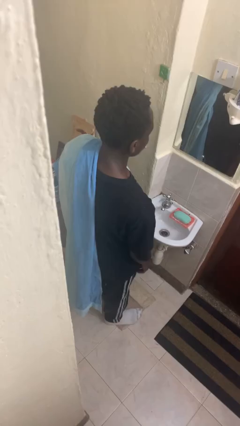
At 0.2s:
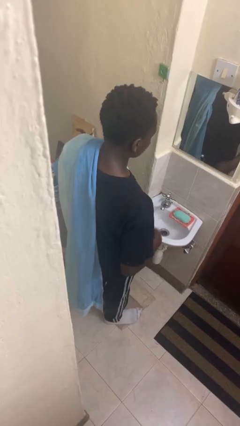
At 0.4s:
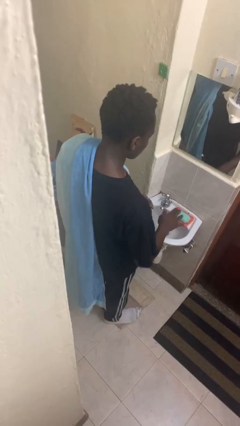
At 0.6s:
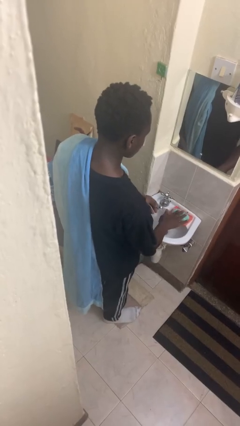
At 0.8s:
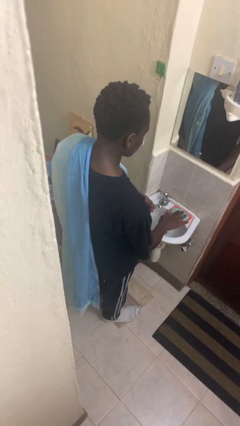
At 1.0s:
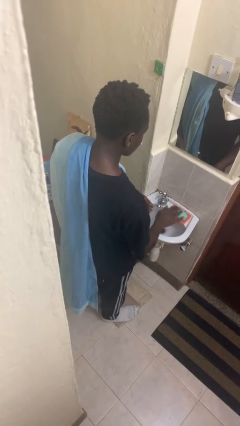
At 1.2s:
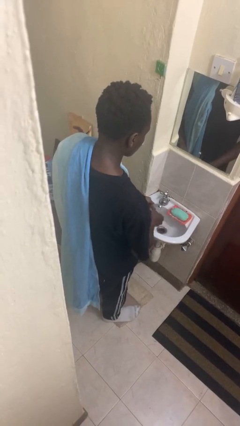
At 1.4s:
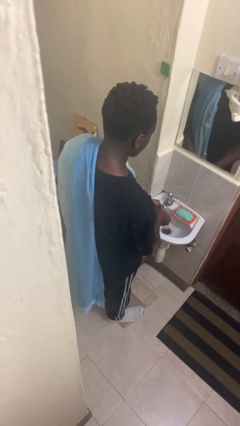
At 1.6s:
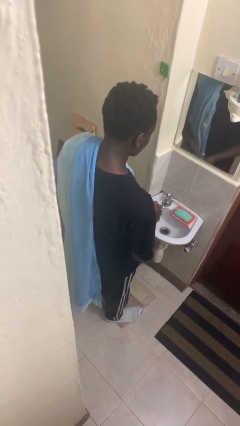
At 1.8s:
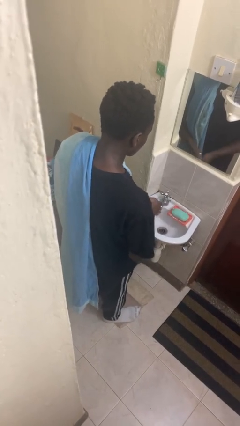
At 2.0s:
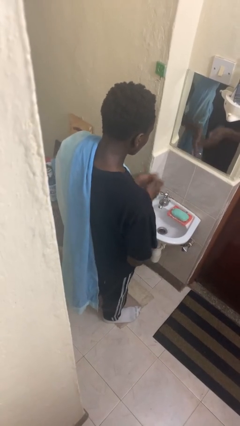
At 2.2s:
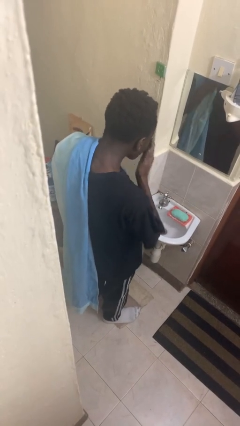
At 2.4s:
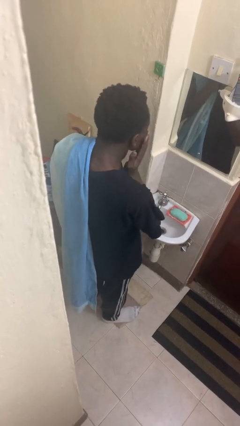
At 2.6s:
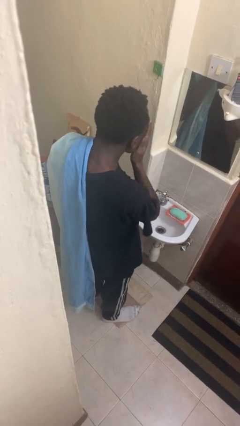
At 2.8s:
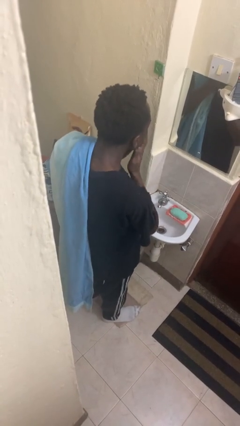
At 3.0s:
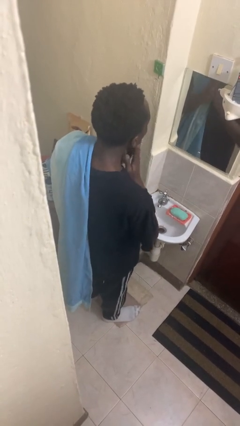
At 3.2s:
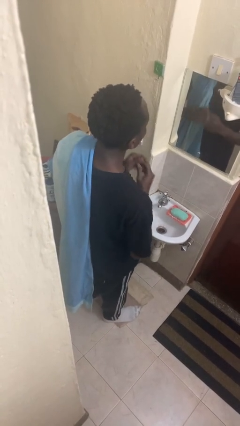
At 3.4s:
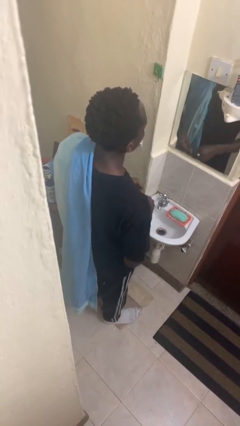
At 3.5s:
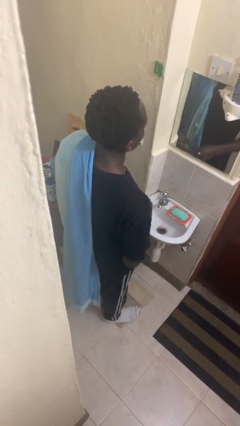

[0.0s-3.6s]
person washes face

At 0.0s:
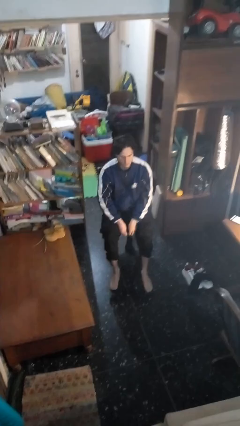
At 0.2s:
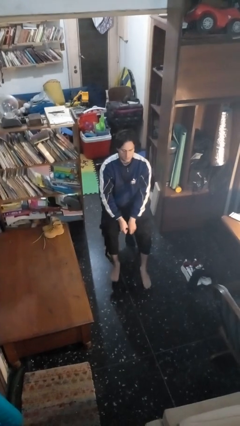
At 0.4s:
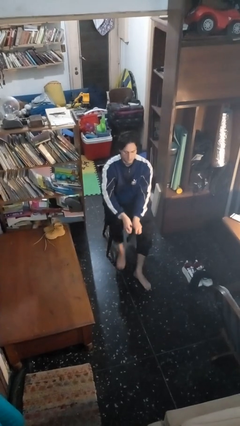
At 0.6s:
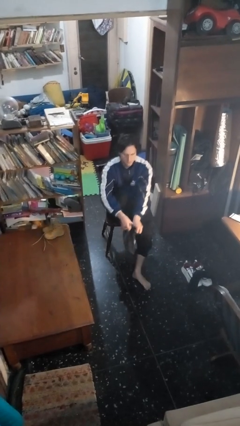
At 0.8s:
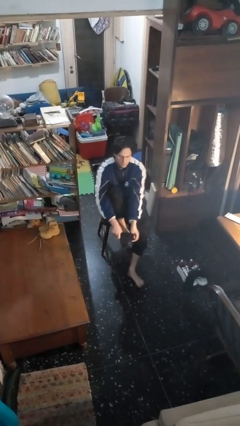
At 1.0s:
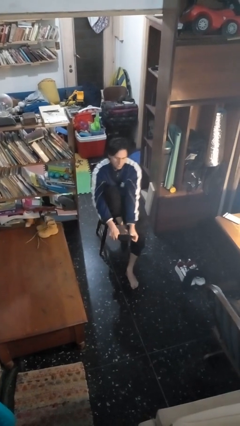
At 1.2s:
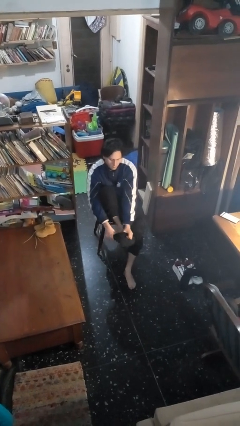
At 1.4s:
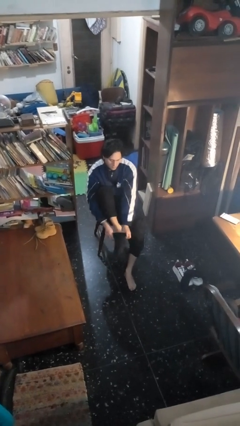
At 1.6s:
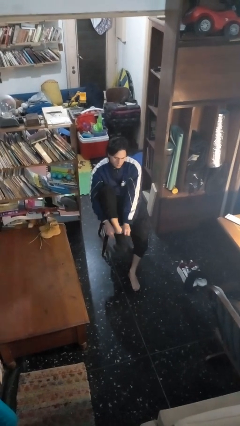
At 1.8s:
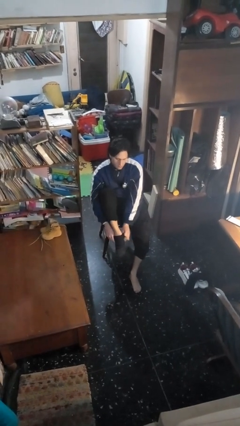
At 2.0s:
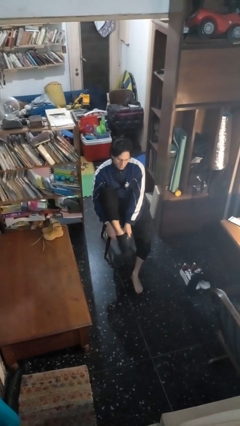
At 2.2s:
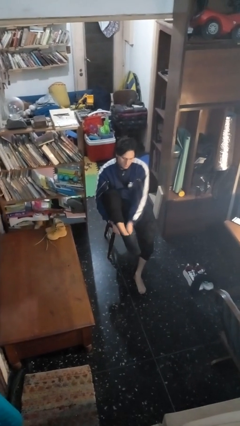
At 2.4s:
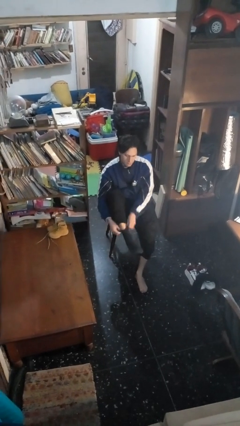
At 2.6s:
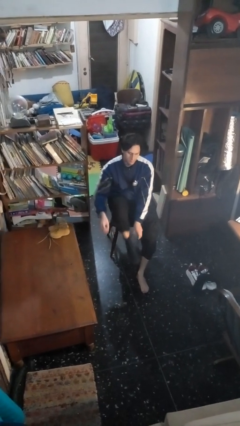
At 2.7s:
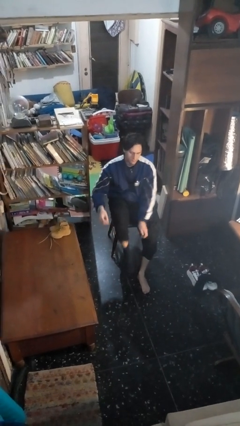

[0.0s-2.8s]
person puts on socks

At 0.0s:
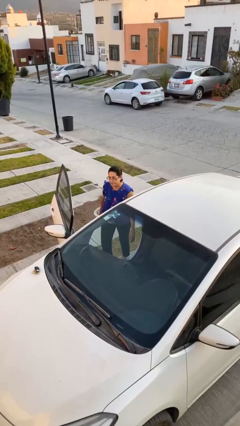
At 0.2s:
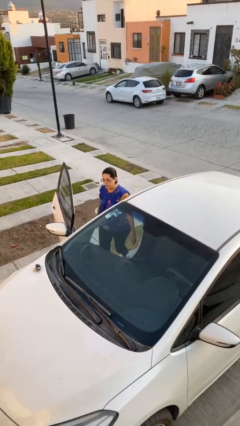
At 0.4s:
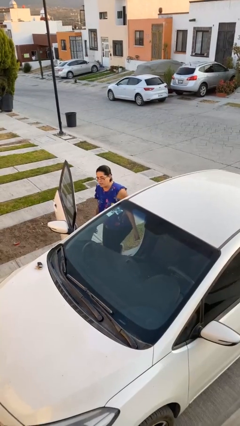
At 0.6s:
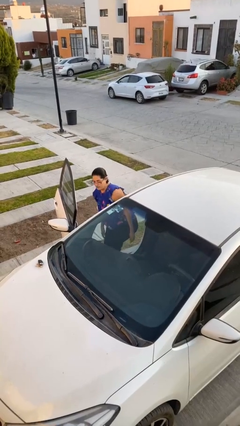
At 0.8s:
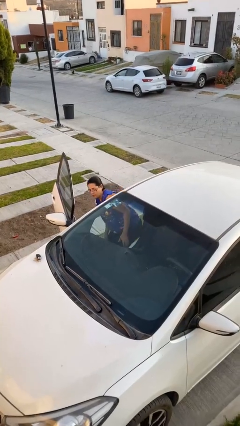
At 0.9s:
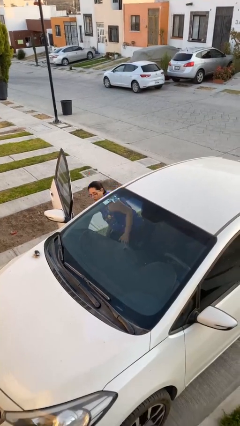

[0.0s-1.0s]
person enters car

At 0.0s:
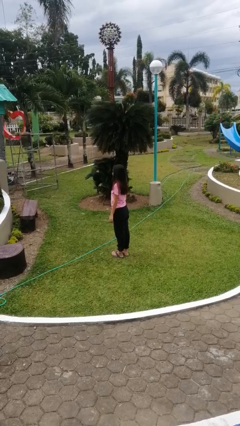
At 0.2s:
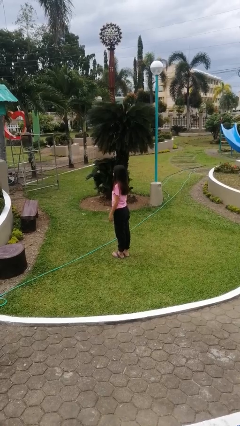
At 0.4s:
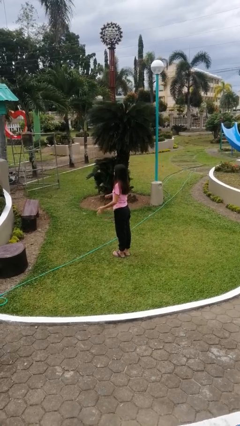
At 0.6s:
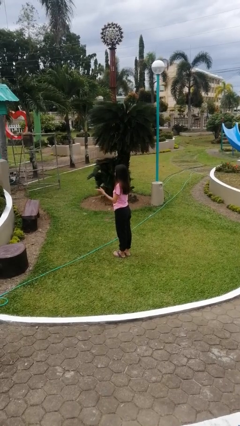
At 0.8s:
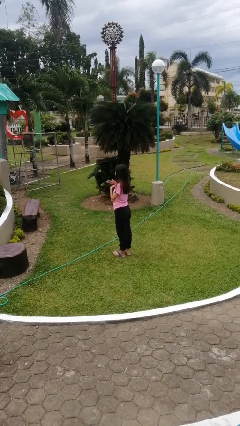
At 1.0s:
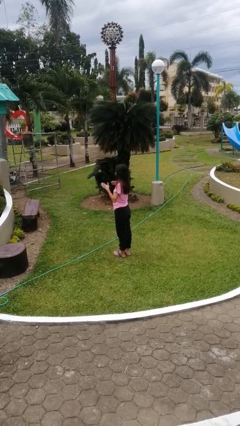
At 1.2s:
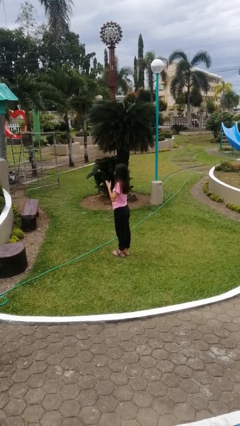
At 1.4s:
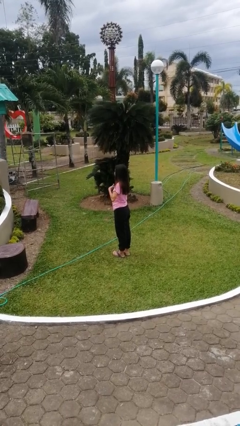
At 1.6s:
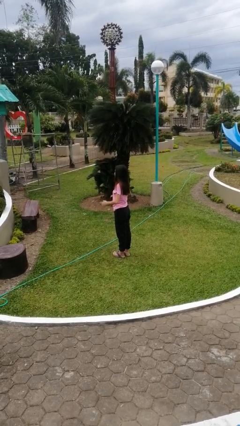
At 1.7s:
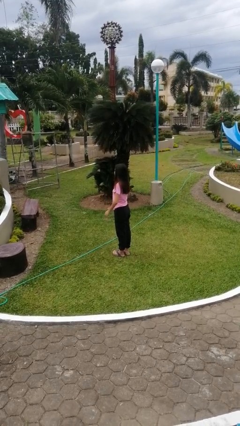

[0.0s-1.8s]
person drums on chest

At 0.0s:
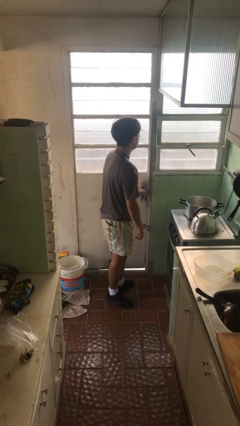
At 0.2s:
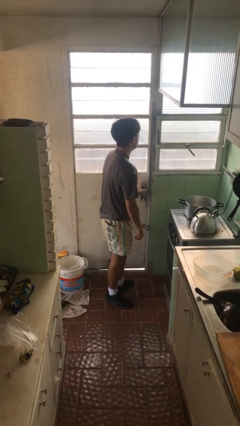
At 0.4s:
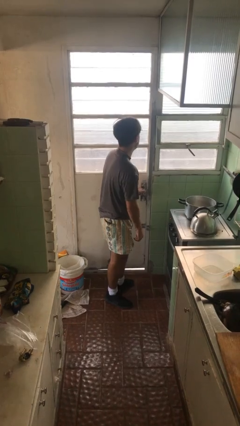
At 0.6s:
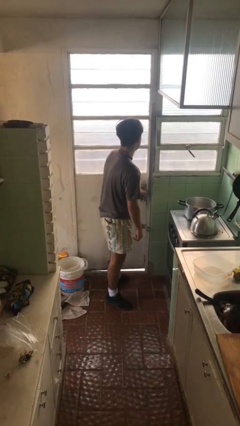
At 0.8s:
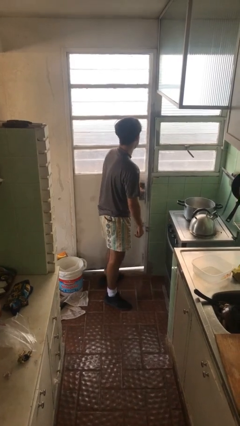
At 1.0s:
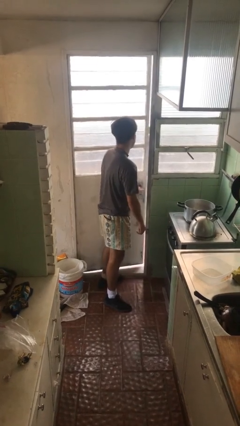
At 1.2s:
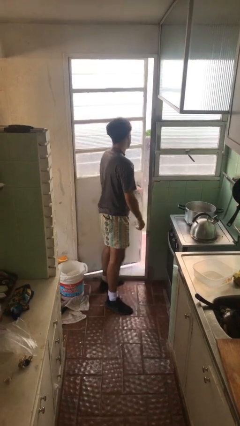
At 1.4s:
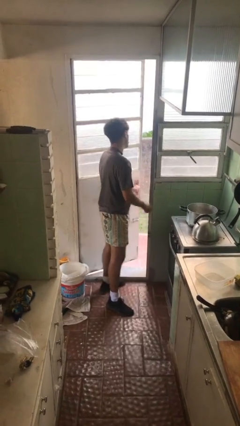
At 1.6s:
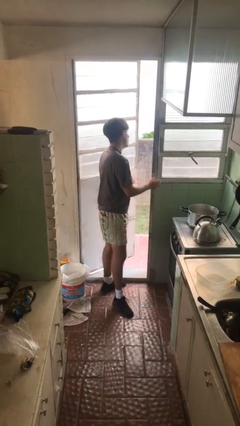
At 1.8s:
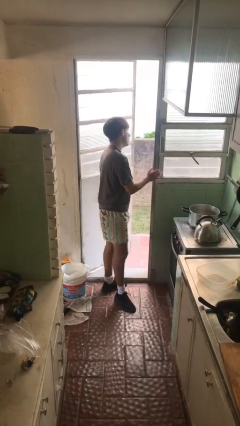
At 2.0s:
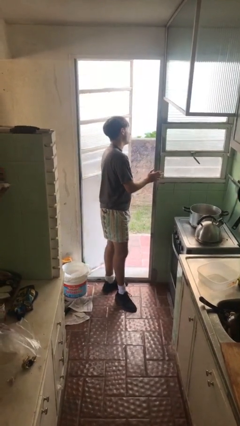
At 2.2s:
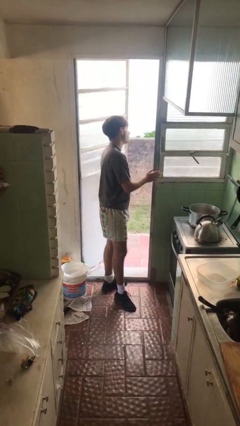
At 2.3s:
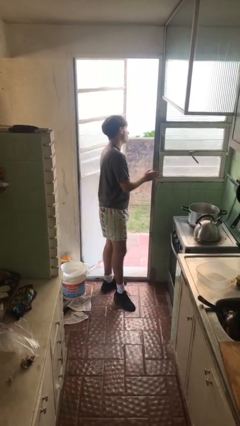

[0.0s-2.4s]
person opens facility door

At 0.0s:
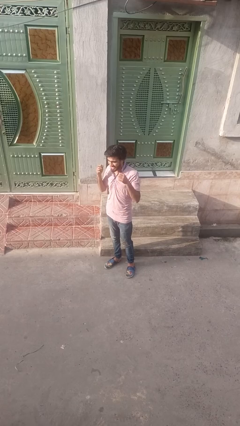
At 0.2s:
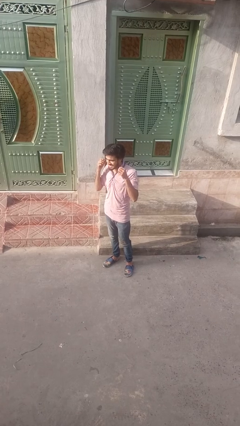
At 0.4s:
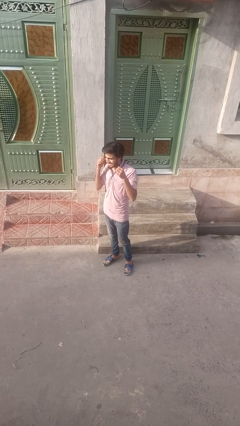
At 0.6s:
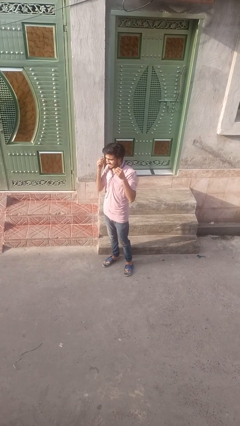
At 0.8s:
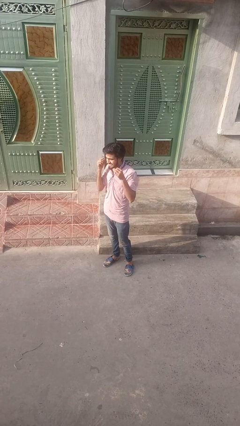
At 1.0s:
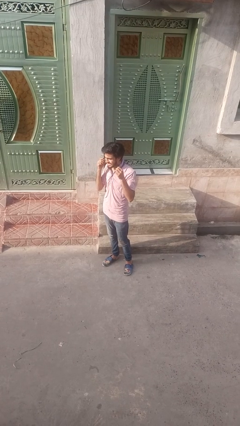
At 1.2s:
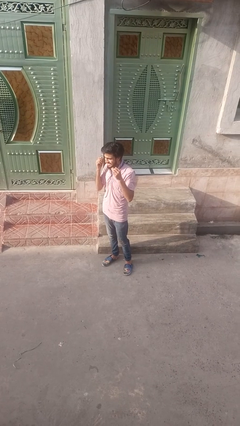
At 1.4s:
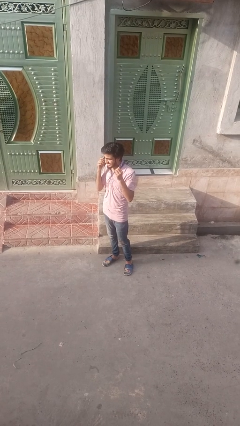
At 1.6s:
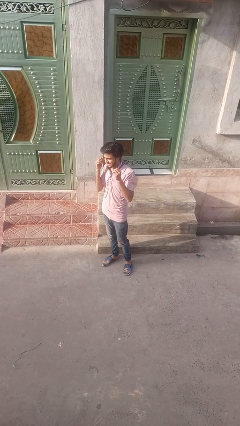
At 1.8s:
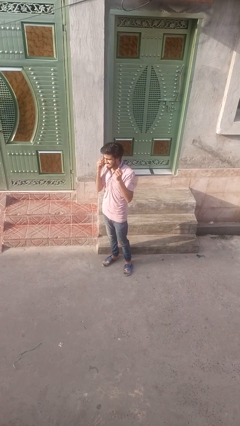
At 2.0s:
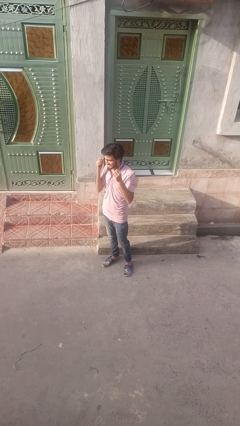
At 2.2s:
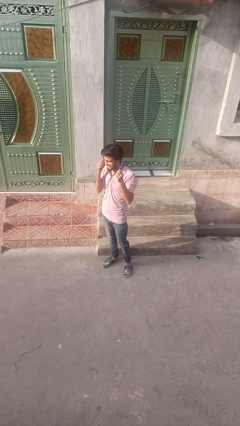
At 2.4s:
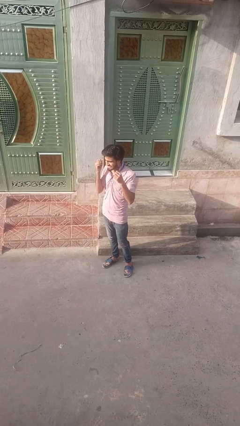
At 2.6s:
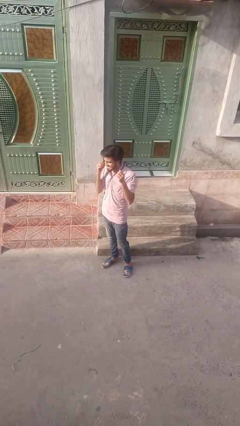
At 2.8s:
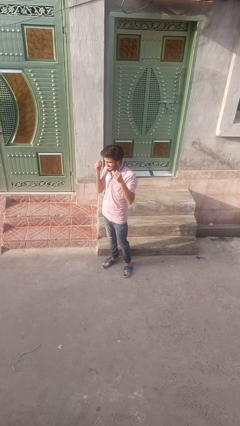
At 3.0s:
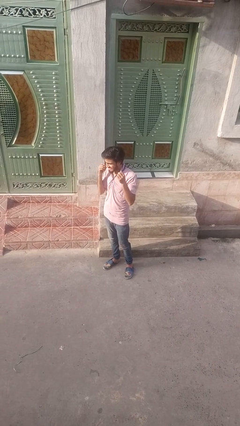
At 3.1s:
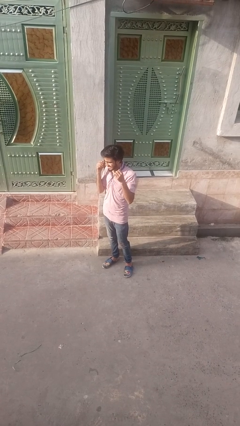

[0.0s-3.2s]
person flosses

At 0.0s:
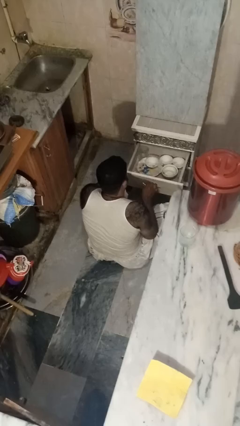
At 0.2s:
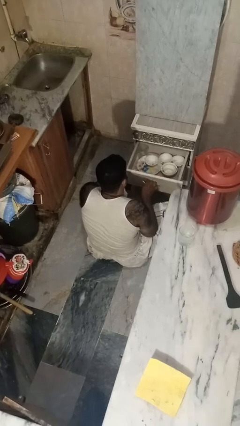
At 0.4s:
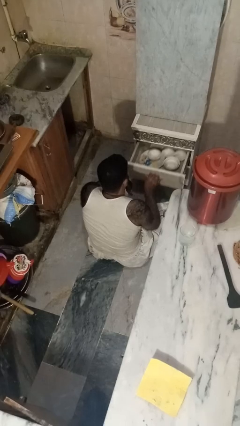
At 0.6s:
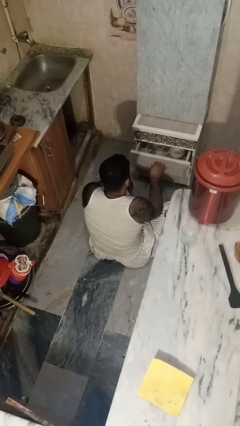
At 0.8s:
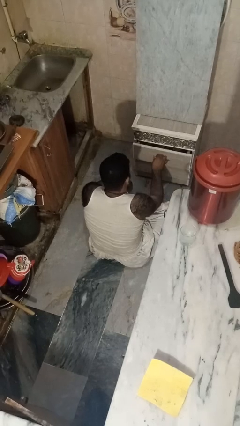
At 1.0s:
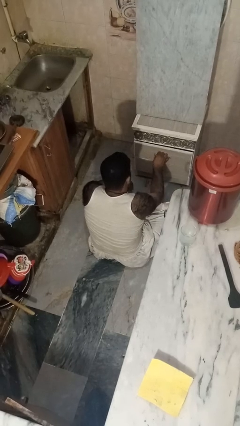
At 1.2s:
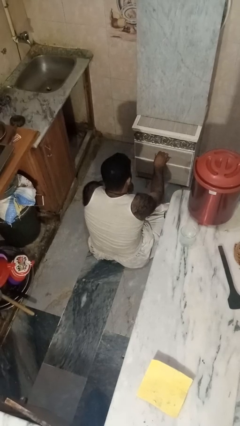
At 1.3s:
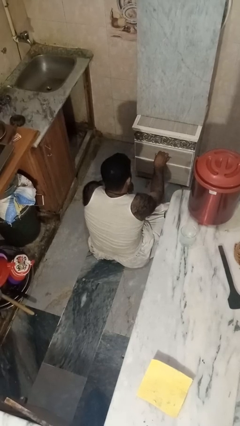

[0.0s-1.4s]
person closes kitchen drawer

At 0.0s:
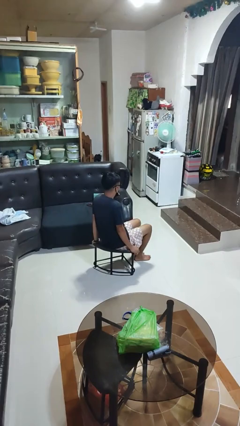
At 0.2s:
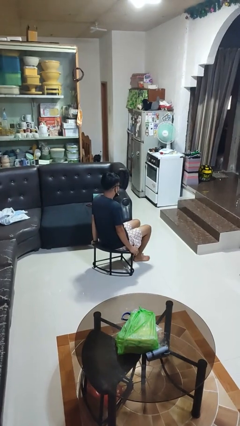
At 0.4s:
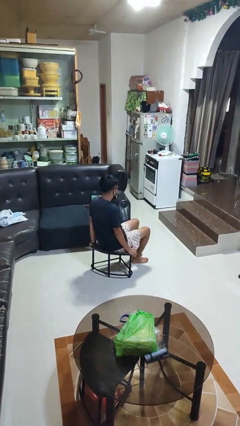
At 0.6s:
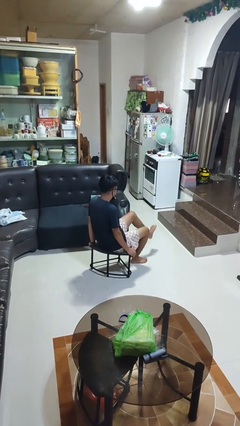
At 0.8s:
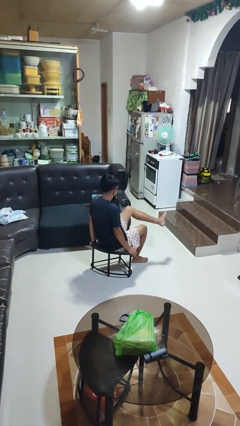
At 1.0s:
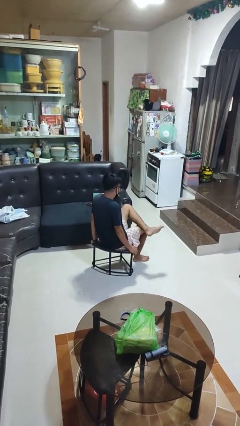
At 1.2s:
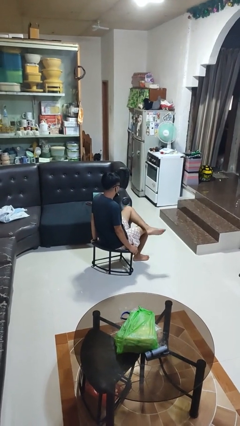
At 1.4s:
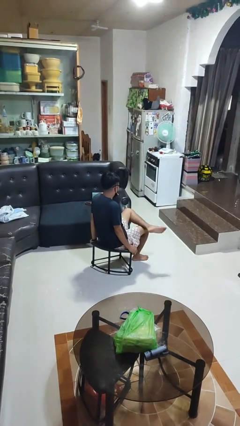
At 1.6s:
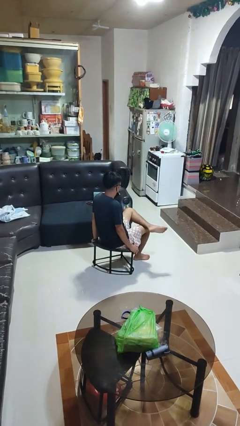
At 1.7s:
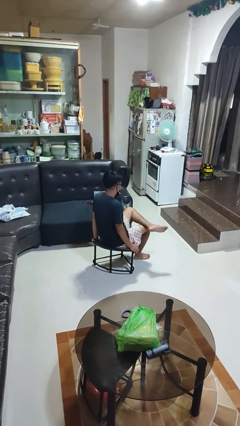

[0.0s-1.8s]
person crosses legs
